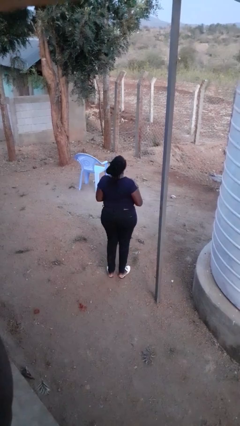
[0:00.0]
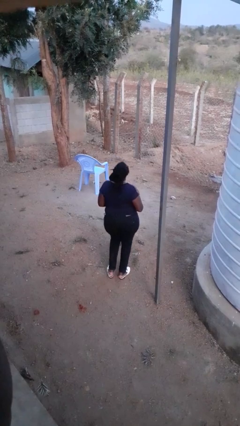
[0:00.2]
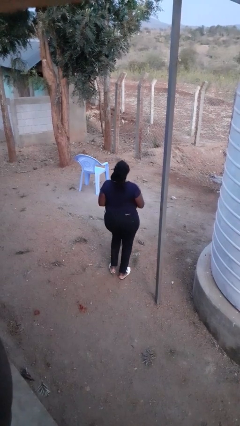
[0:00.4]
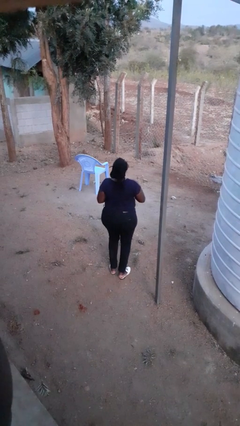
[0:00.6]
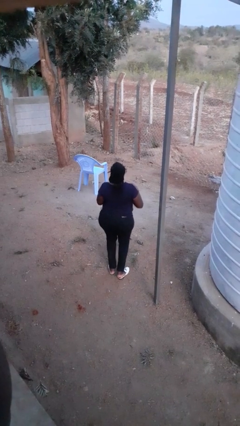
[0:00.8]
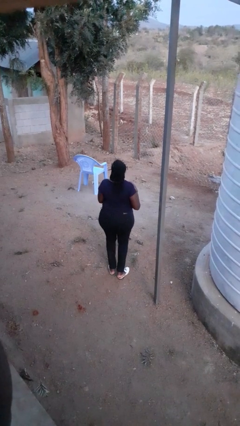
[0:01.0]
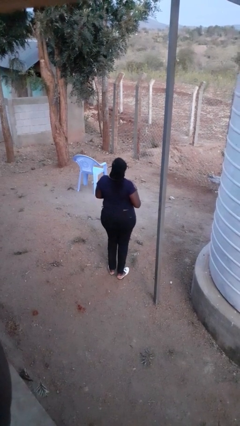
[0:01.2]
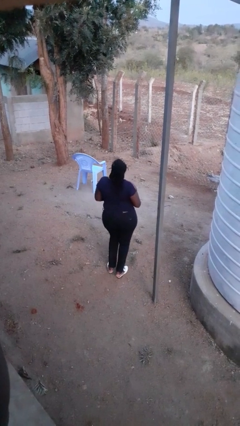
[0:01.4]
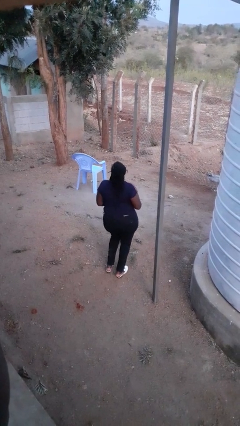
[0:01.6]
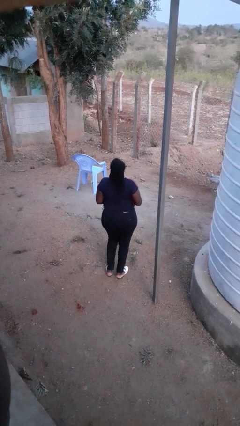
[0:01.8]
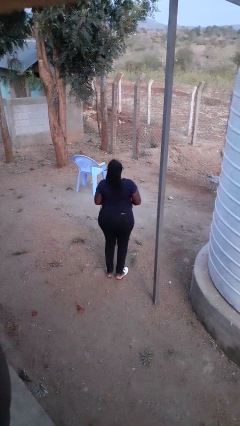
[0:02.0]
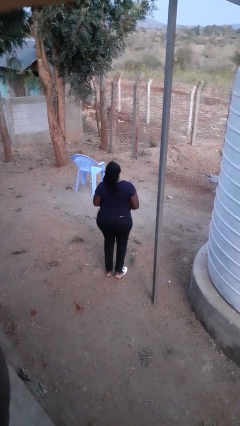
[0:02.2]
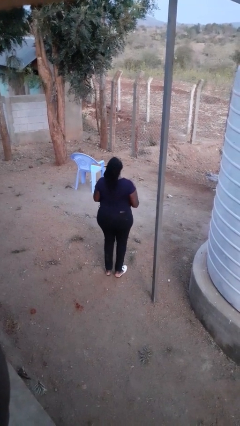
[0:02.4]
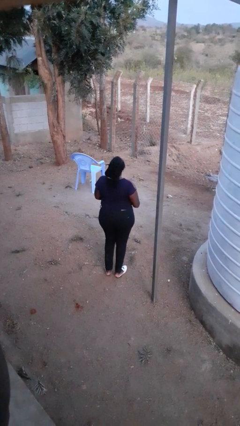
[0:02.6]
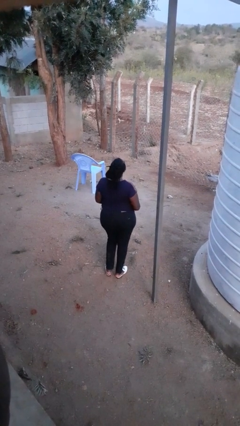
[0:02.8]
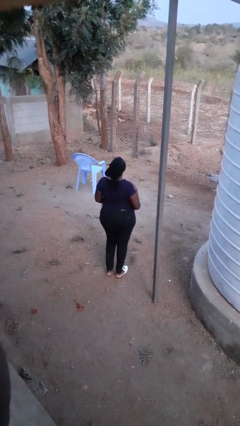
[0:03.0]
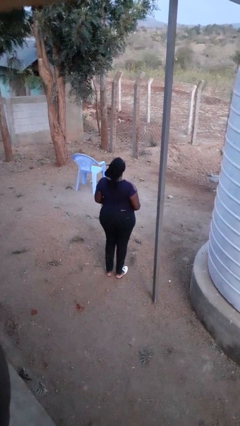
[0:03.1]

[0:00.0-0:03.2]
person dances in place

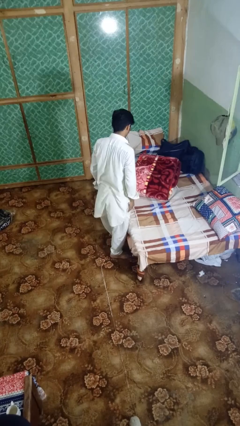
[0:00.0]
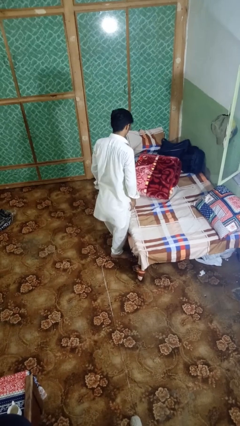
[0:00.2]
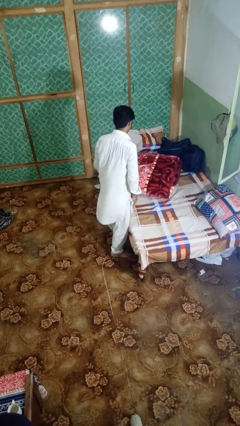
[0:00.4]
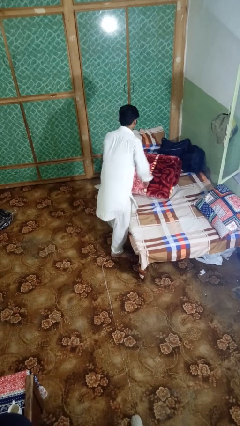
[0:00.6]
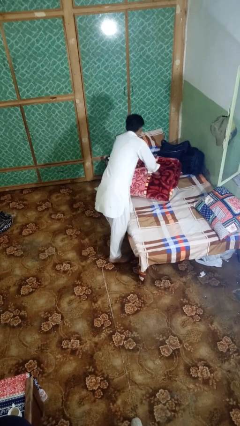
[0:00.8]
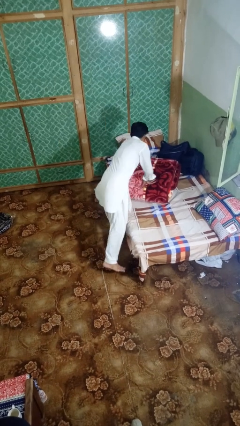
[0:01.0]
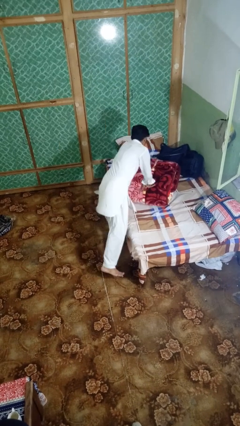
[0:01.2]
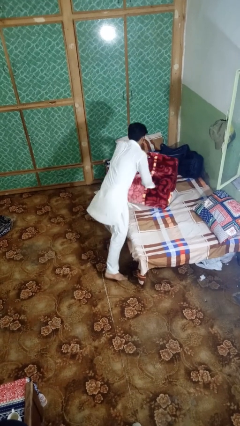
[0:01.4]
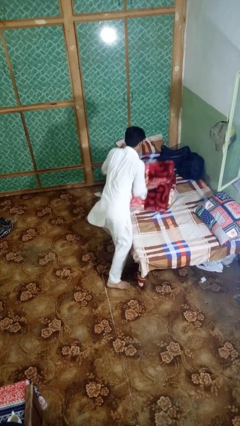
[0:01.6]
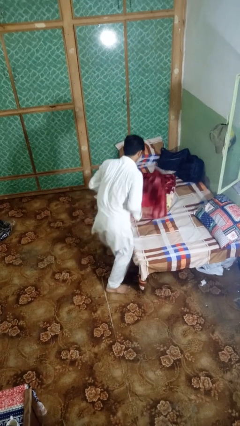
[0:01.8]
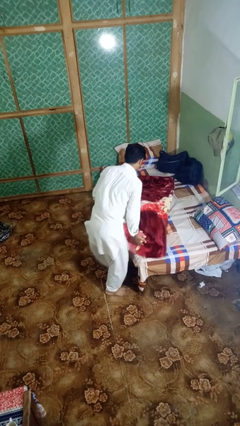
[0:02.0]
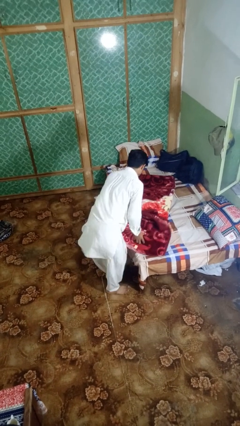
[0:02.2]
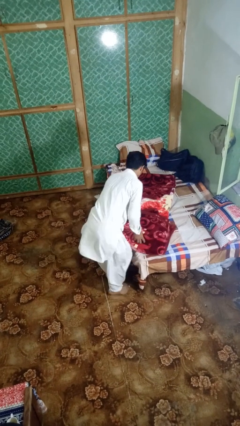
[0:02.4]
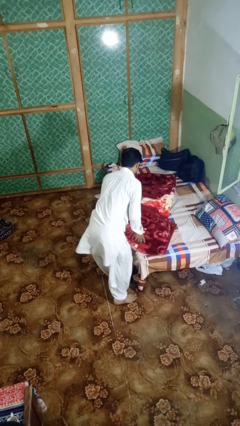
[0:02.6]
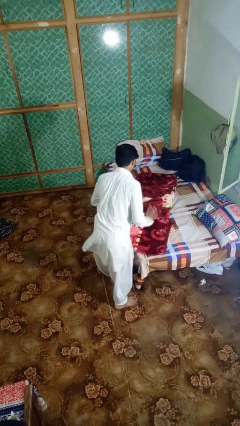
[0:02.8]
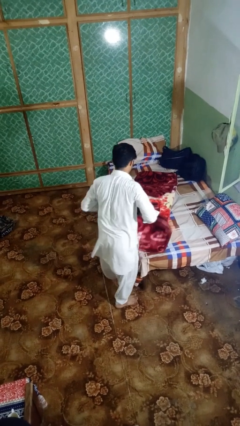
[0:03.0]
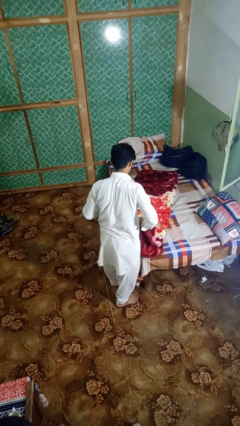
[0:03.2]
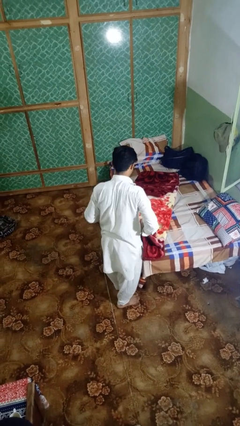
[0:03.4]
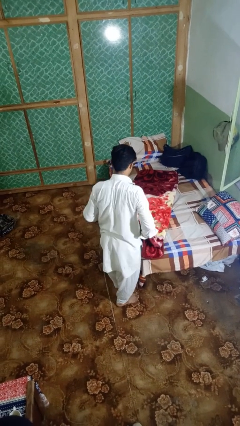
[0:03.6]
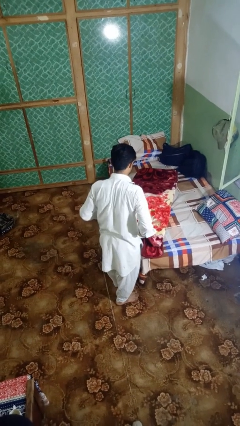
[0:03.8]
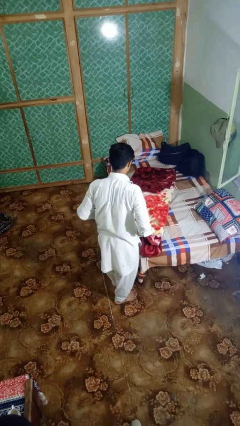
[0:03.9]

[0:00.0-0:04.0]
person unfolds blanket

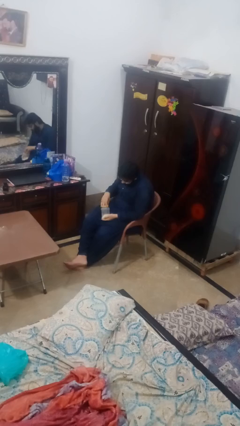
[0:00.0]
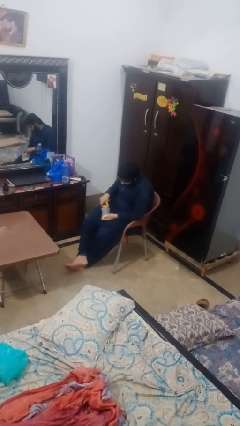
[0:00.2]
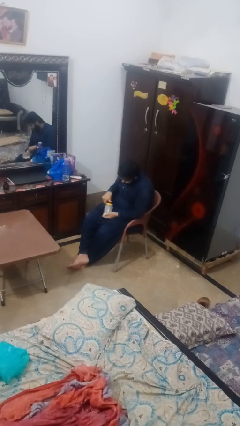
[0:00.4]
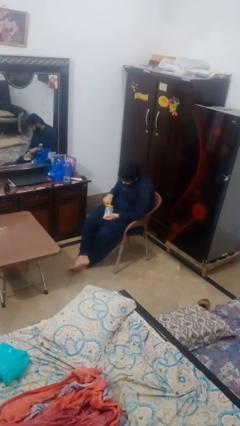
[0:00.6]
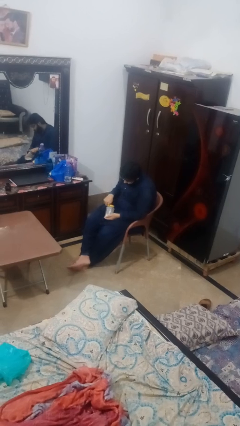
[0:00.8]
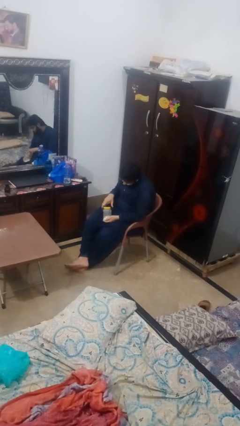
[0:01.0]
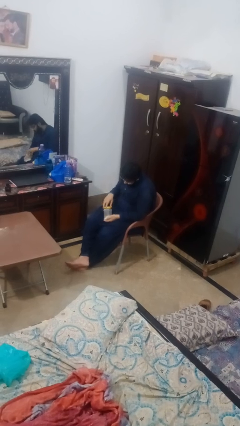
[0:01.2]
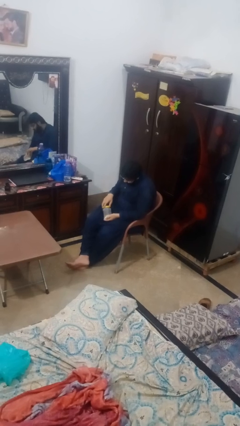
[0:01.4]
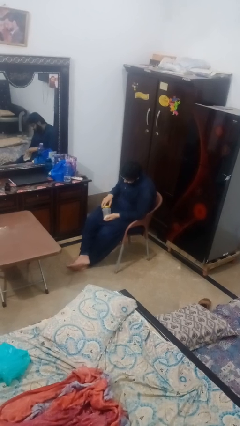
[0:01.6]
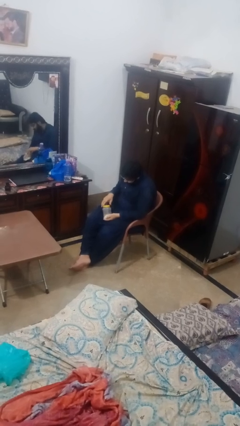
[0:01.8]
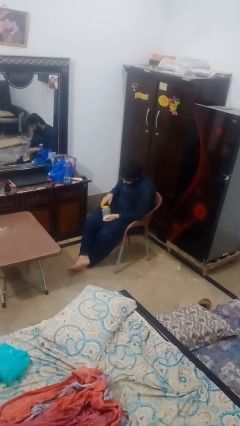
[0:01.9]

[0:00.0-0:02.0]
person closes jar

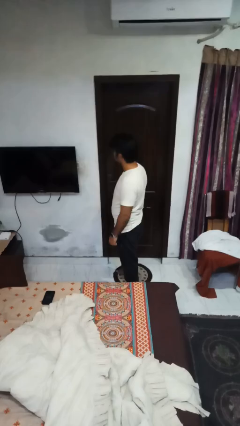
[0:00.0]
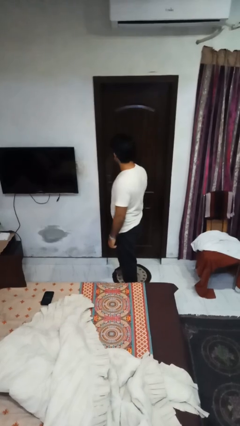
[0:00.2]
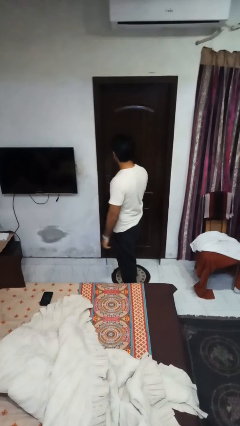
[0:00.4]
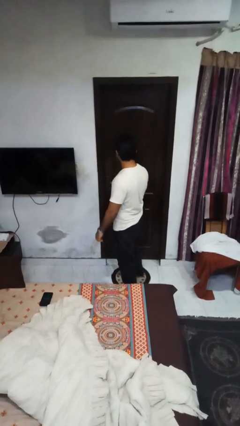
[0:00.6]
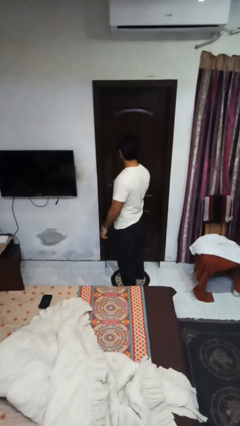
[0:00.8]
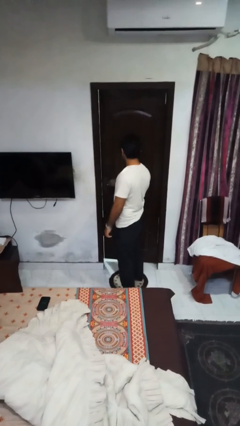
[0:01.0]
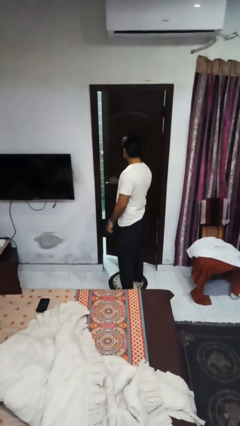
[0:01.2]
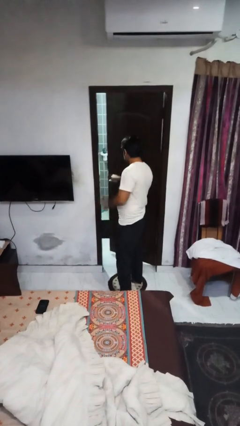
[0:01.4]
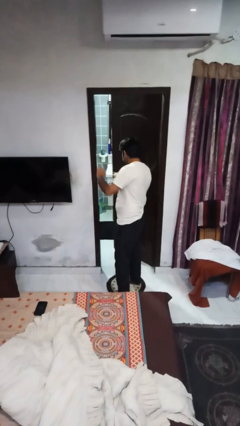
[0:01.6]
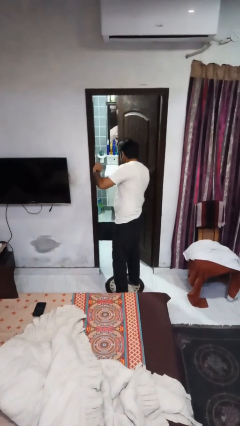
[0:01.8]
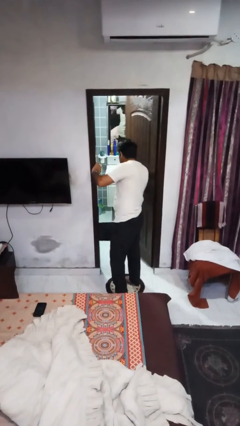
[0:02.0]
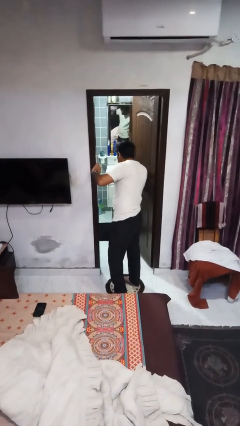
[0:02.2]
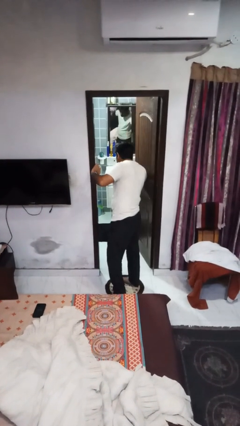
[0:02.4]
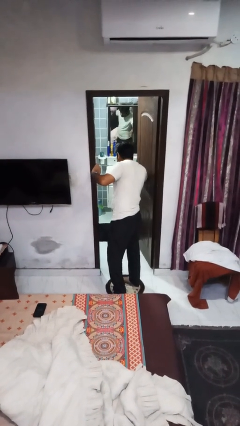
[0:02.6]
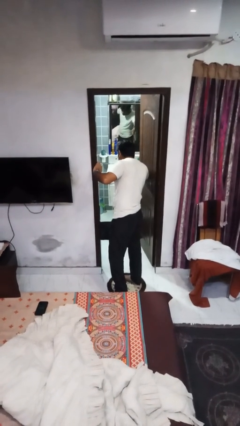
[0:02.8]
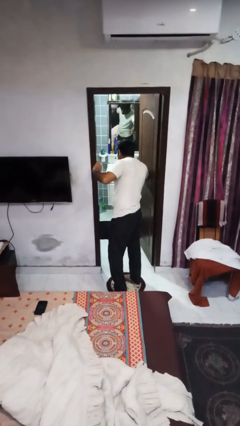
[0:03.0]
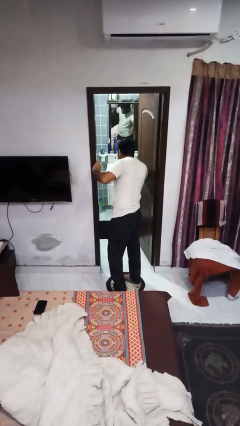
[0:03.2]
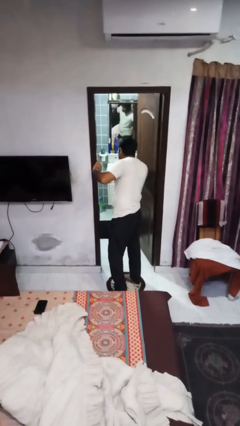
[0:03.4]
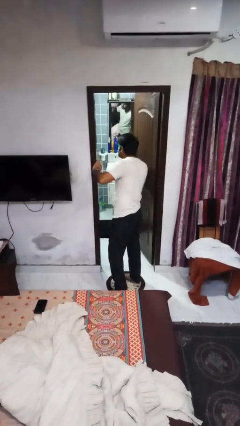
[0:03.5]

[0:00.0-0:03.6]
person opens facility door

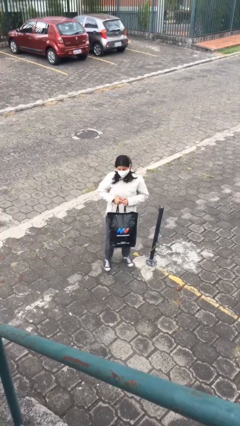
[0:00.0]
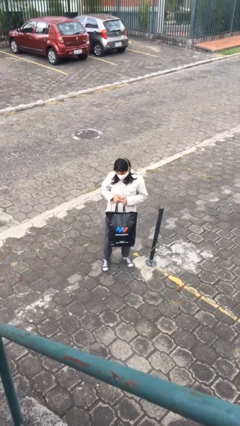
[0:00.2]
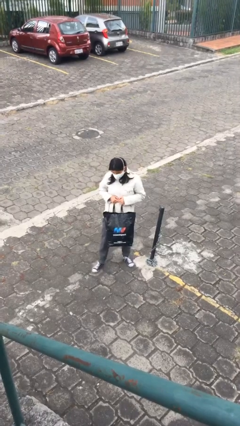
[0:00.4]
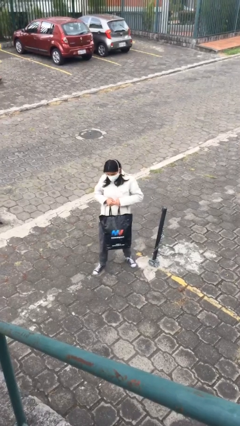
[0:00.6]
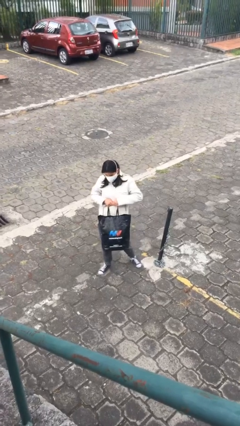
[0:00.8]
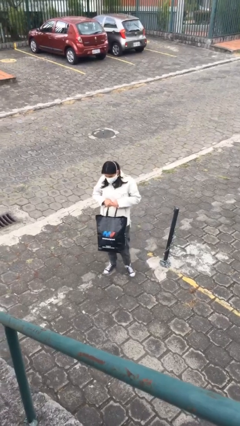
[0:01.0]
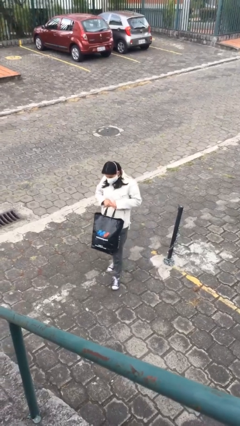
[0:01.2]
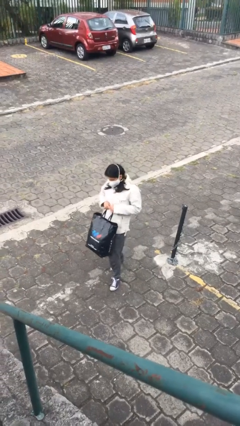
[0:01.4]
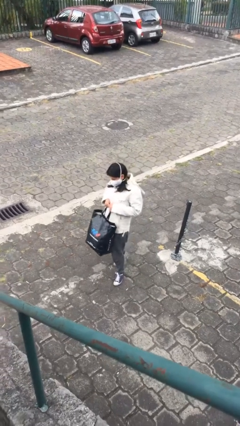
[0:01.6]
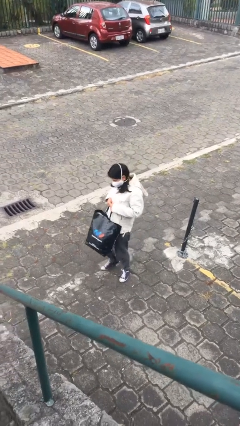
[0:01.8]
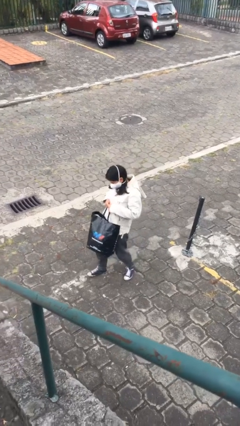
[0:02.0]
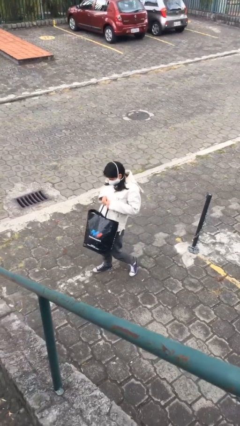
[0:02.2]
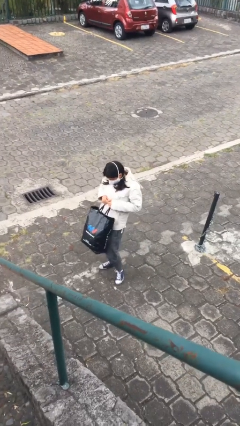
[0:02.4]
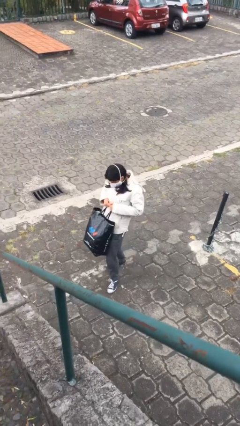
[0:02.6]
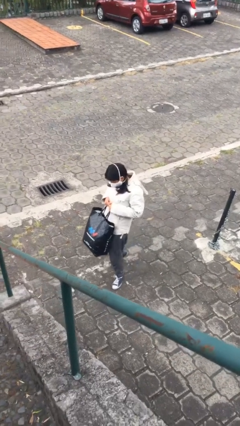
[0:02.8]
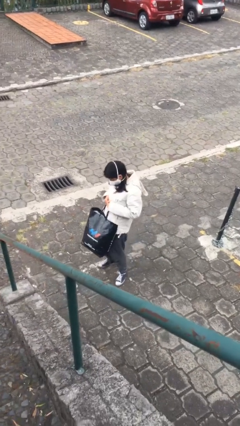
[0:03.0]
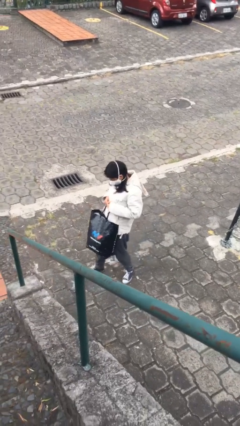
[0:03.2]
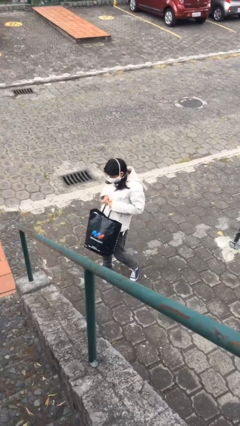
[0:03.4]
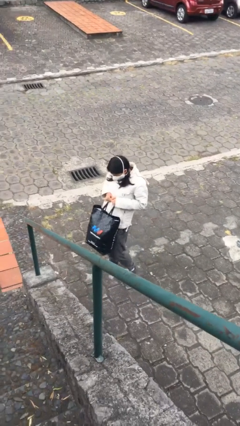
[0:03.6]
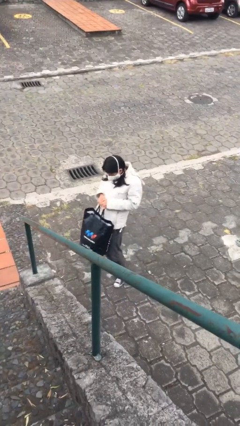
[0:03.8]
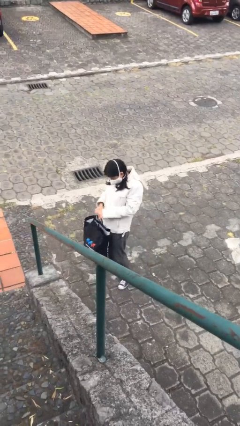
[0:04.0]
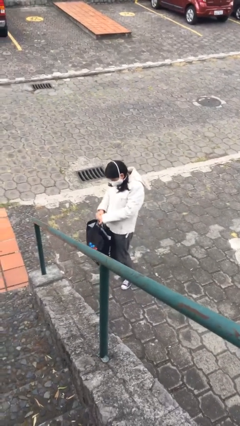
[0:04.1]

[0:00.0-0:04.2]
person carries heavy object

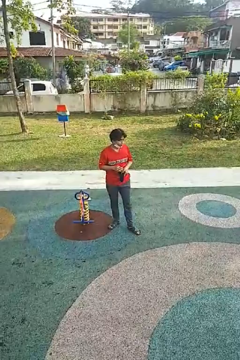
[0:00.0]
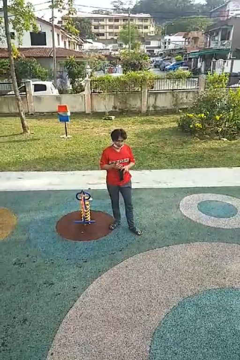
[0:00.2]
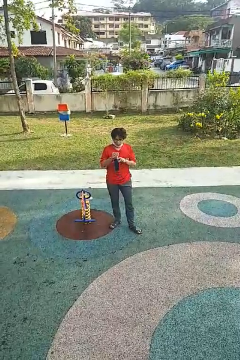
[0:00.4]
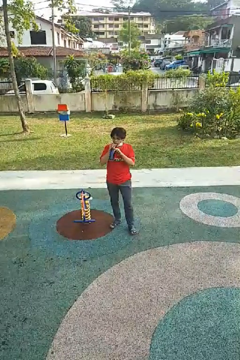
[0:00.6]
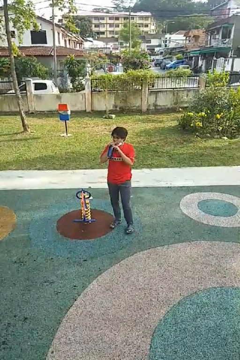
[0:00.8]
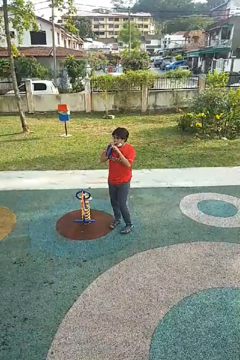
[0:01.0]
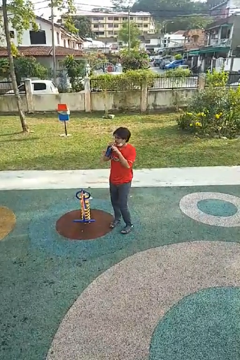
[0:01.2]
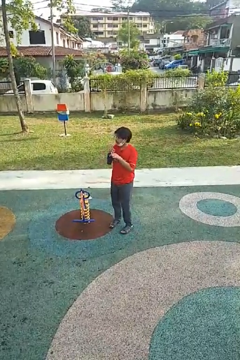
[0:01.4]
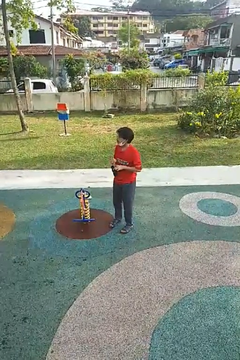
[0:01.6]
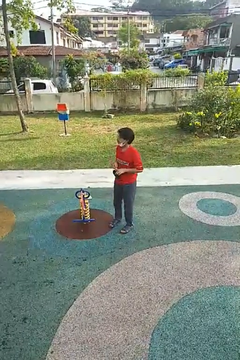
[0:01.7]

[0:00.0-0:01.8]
person drinks from straw
